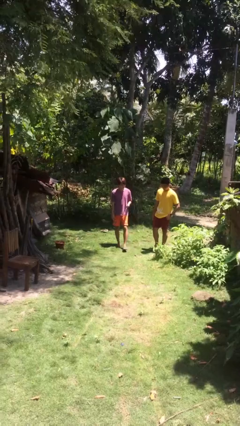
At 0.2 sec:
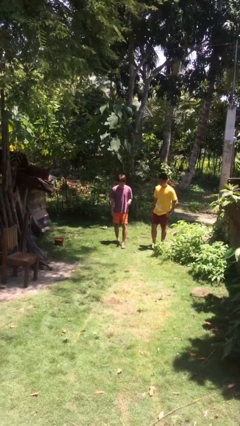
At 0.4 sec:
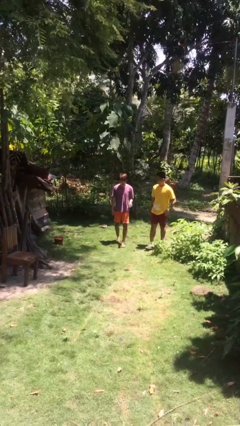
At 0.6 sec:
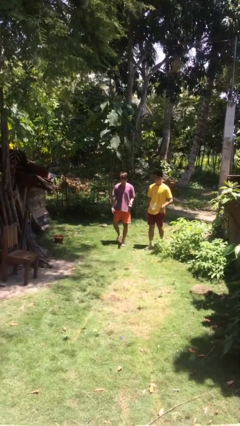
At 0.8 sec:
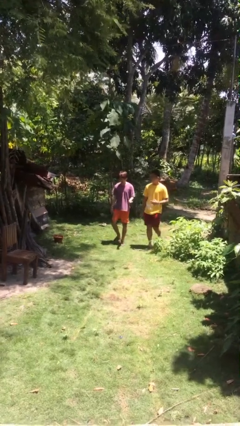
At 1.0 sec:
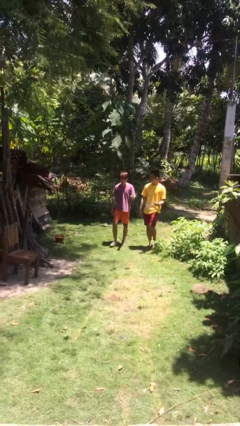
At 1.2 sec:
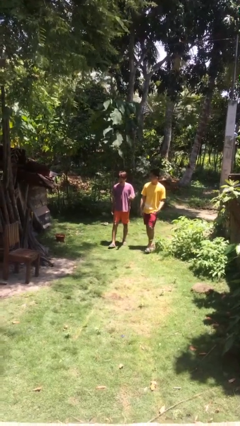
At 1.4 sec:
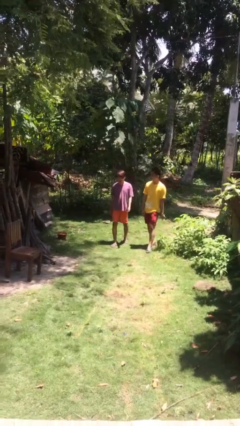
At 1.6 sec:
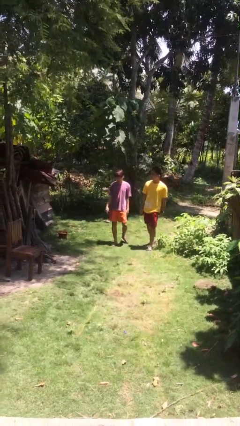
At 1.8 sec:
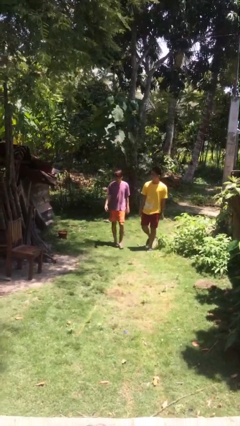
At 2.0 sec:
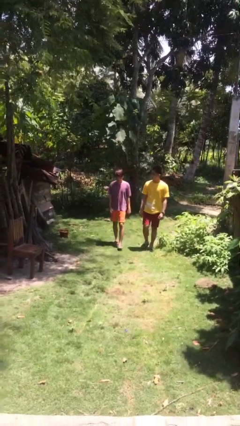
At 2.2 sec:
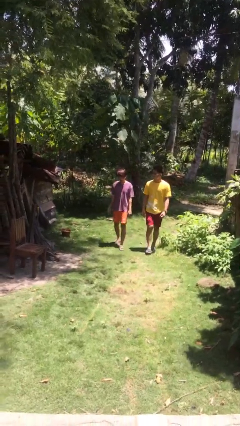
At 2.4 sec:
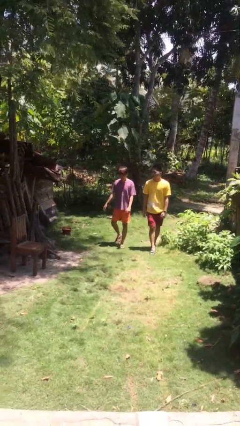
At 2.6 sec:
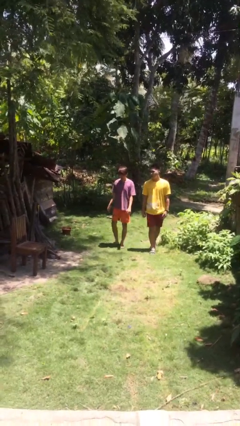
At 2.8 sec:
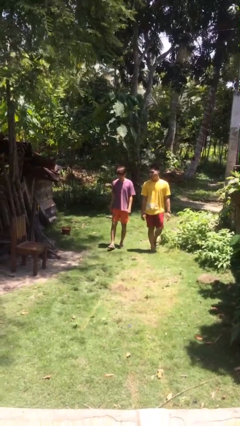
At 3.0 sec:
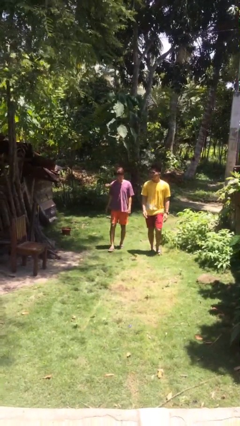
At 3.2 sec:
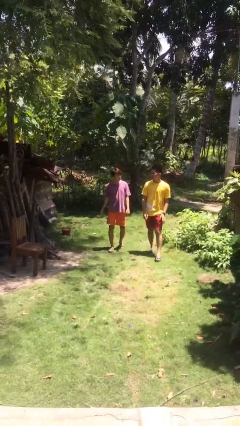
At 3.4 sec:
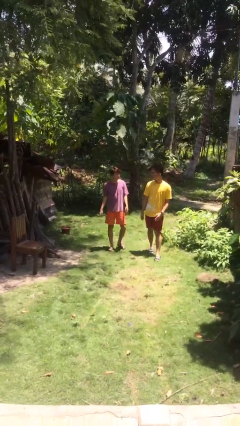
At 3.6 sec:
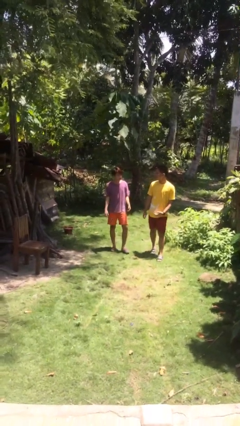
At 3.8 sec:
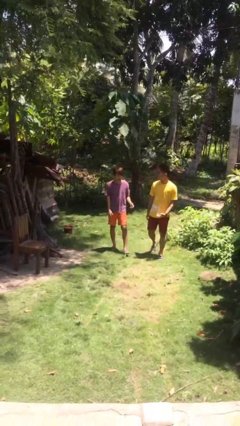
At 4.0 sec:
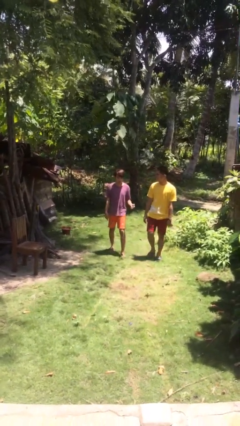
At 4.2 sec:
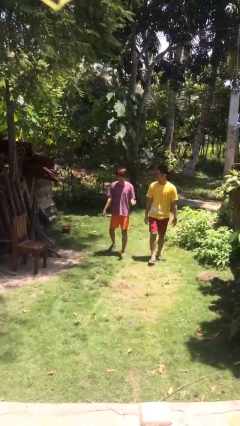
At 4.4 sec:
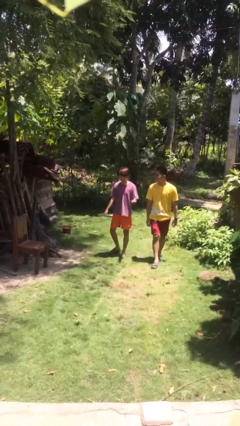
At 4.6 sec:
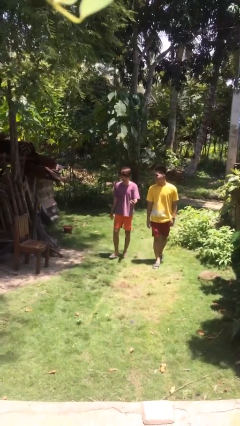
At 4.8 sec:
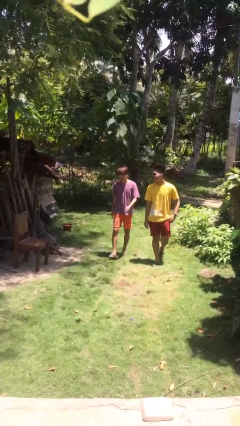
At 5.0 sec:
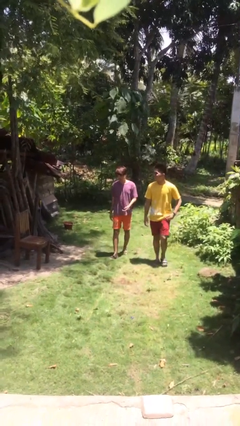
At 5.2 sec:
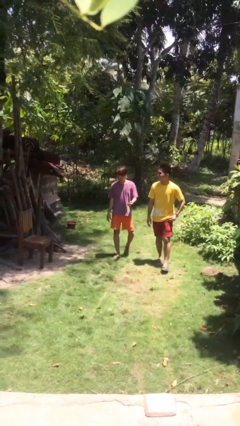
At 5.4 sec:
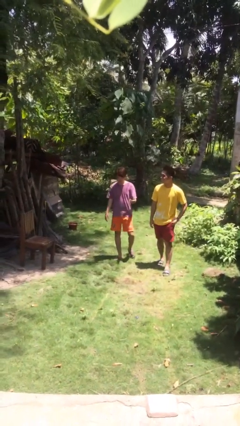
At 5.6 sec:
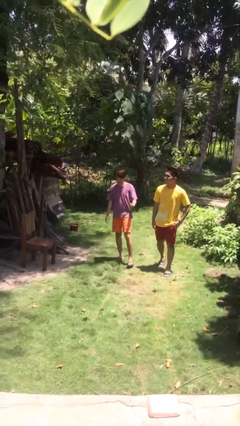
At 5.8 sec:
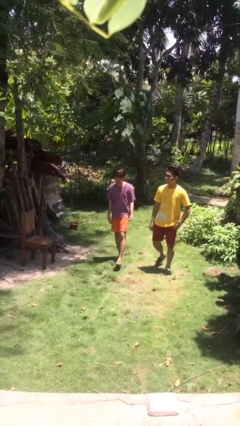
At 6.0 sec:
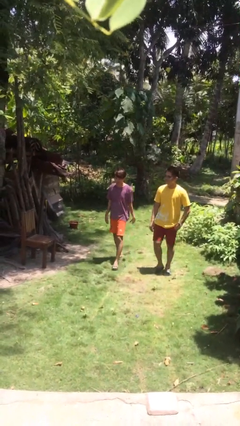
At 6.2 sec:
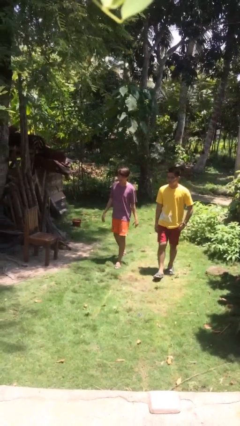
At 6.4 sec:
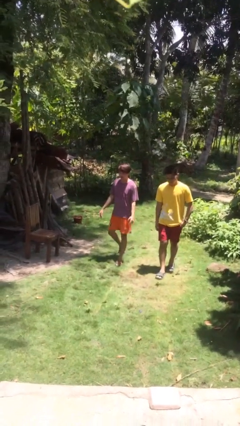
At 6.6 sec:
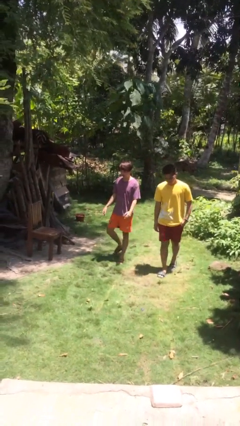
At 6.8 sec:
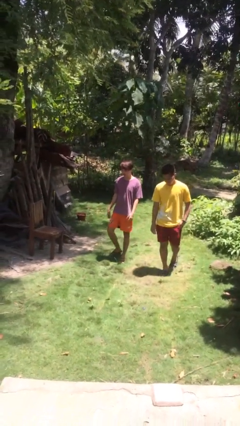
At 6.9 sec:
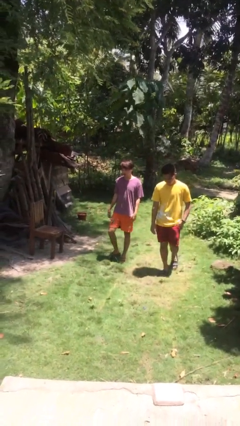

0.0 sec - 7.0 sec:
person talks to person

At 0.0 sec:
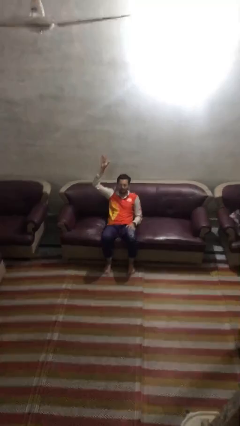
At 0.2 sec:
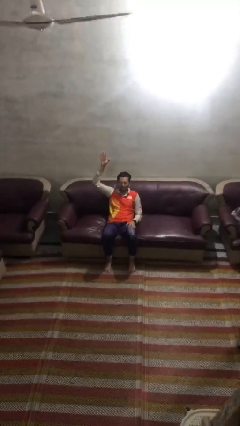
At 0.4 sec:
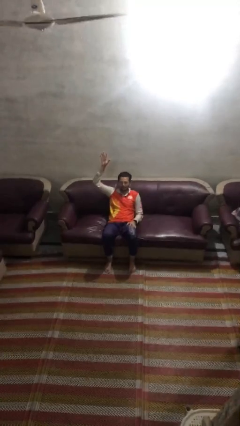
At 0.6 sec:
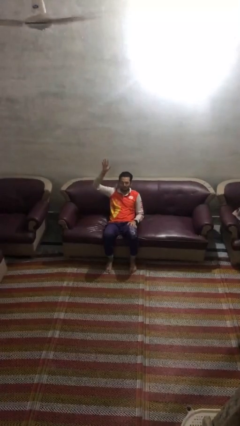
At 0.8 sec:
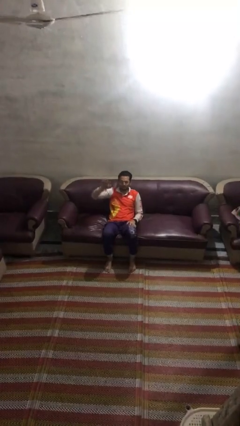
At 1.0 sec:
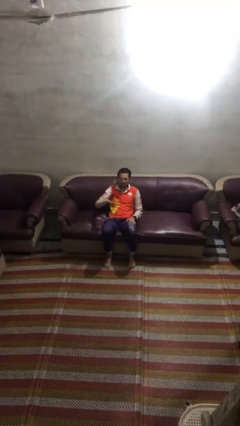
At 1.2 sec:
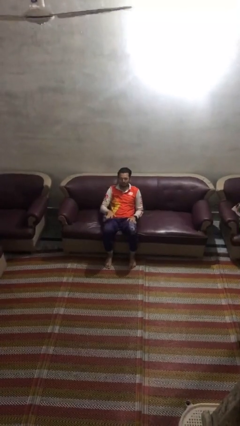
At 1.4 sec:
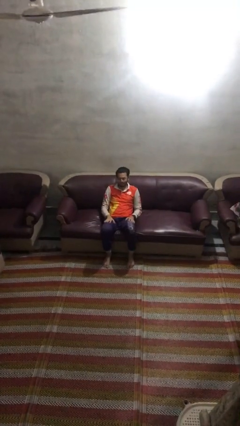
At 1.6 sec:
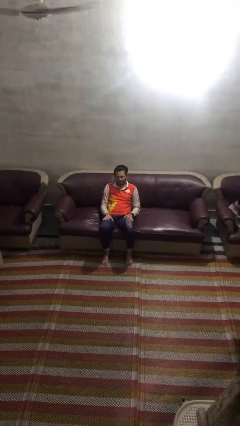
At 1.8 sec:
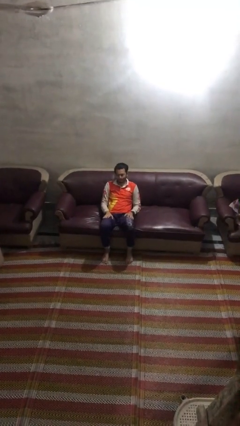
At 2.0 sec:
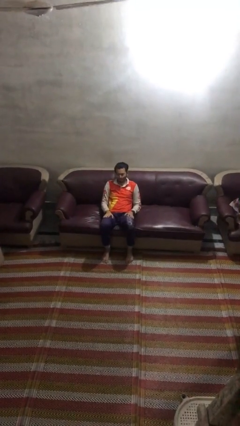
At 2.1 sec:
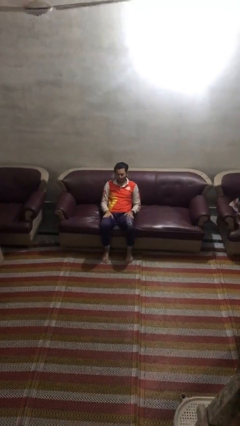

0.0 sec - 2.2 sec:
person gestures lower hand

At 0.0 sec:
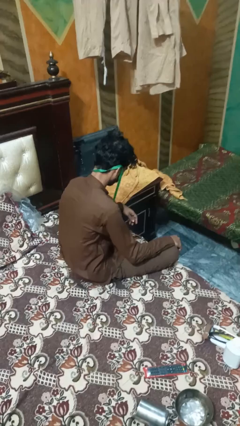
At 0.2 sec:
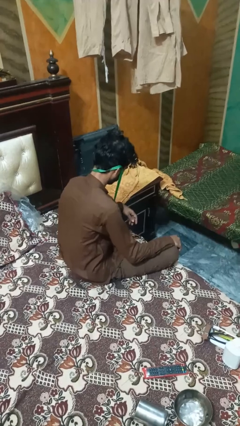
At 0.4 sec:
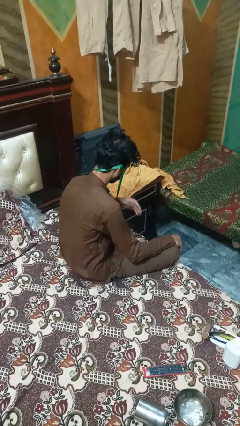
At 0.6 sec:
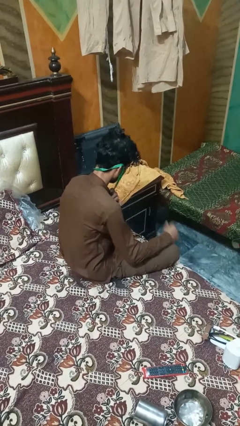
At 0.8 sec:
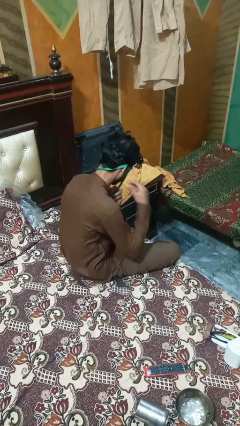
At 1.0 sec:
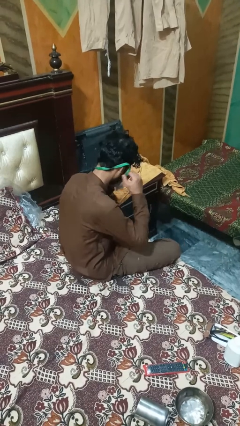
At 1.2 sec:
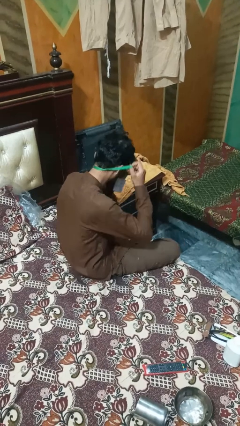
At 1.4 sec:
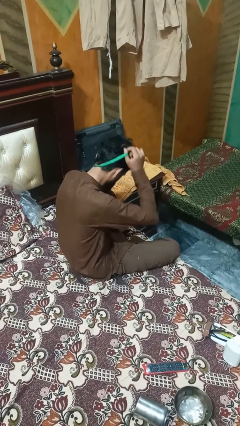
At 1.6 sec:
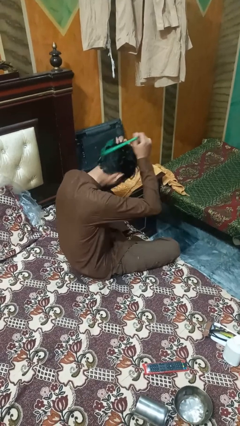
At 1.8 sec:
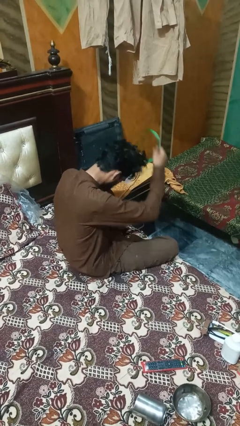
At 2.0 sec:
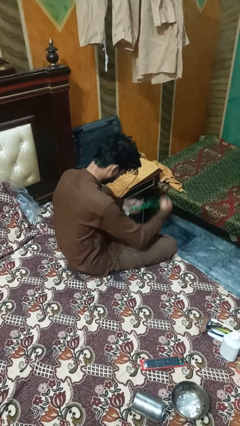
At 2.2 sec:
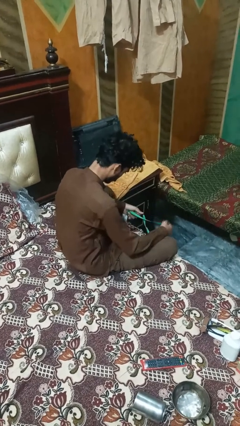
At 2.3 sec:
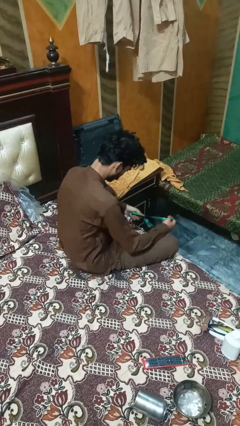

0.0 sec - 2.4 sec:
person takes off necklace

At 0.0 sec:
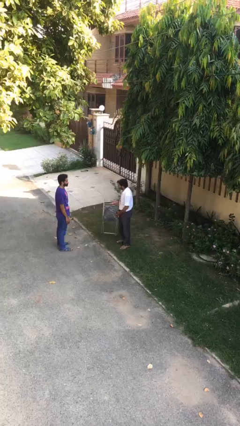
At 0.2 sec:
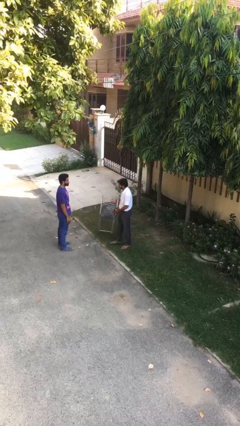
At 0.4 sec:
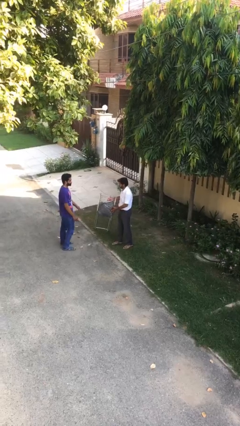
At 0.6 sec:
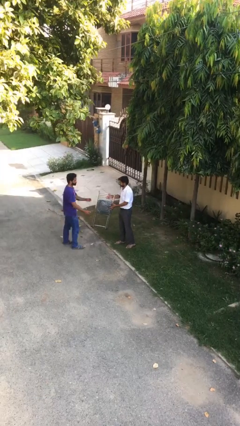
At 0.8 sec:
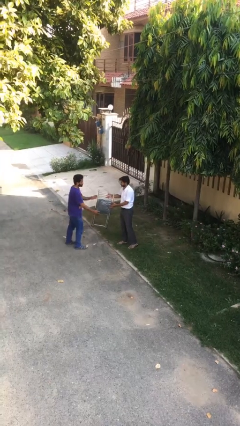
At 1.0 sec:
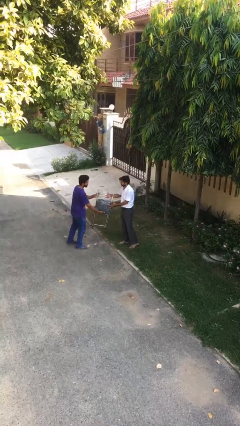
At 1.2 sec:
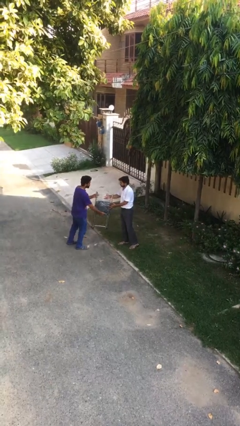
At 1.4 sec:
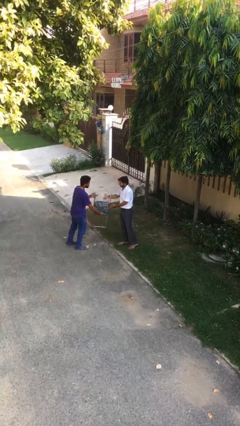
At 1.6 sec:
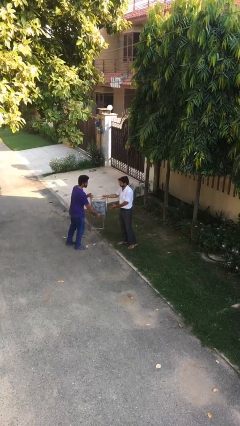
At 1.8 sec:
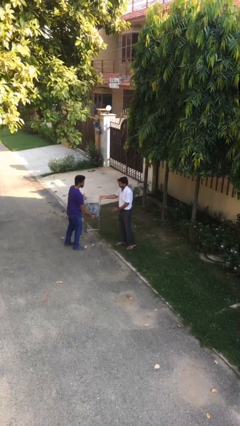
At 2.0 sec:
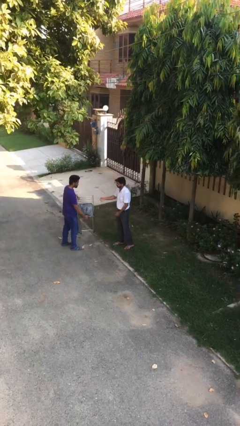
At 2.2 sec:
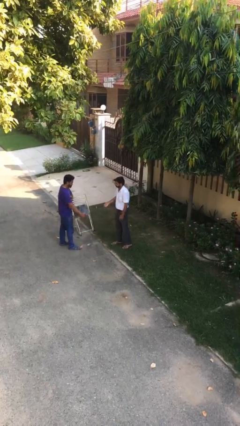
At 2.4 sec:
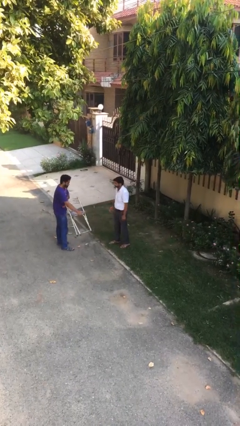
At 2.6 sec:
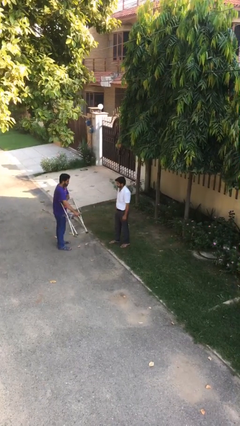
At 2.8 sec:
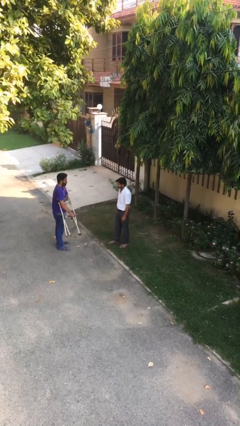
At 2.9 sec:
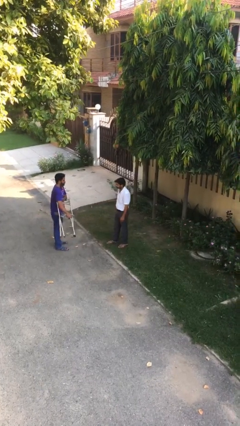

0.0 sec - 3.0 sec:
person transfers object to person

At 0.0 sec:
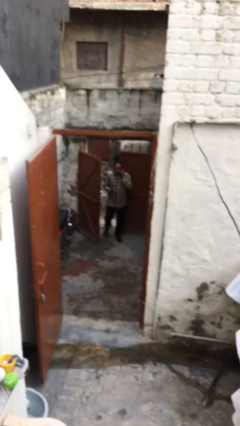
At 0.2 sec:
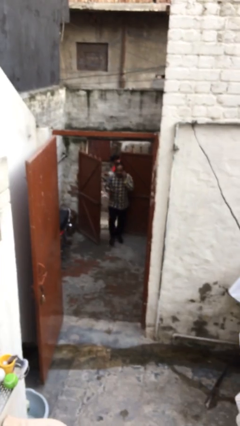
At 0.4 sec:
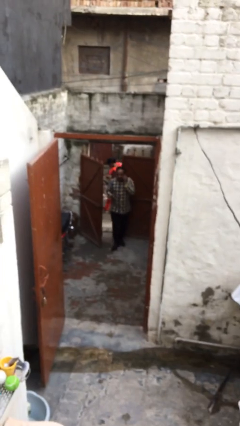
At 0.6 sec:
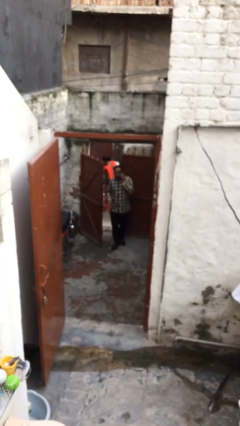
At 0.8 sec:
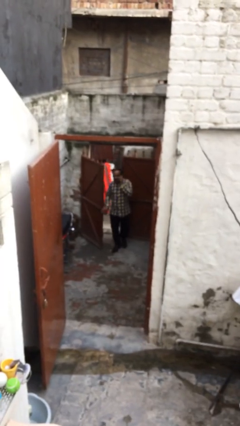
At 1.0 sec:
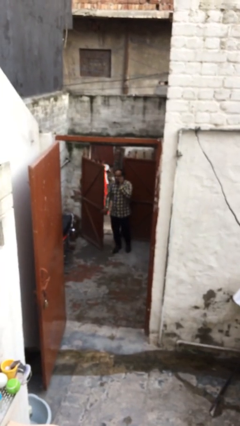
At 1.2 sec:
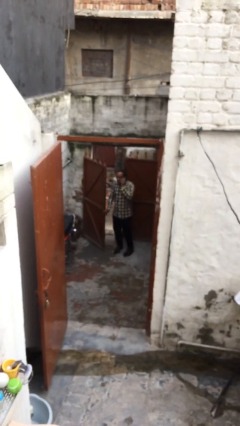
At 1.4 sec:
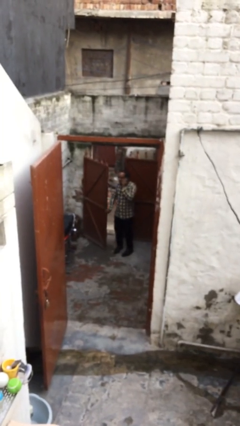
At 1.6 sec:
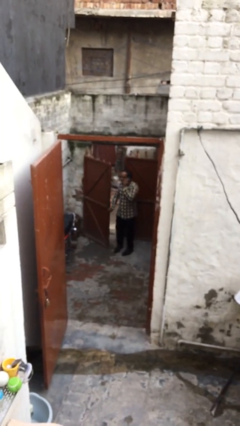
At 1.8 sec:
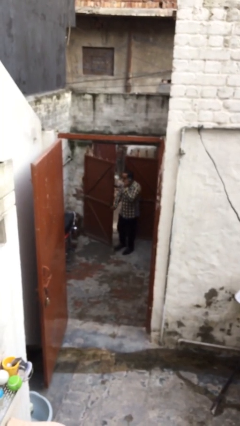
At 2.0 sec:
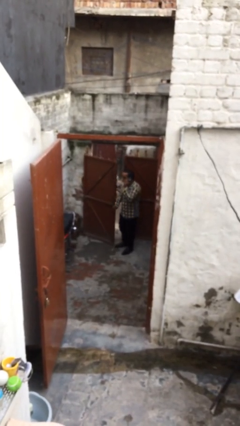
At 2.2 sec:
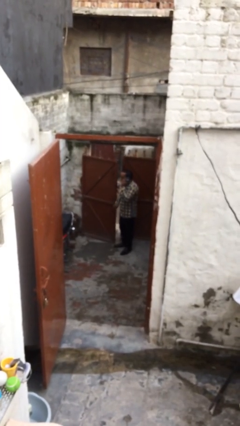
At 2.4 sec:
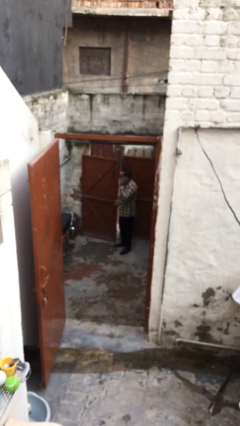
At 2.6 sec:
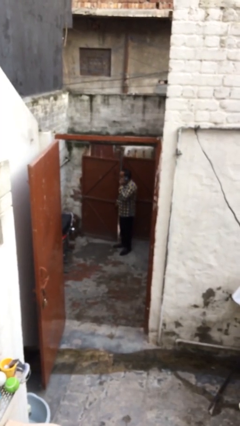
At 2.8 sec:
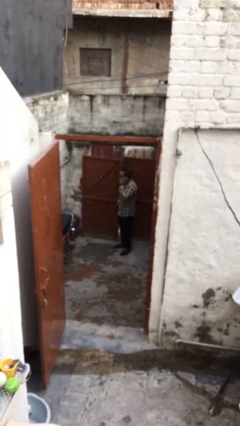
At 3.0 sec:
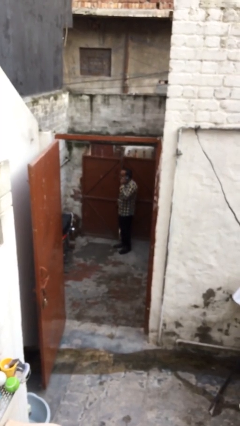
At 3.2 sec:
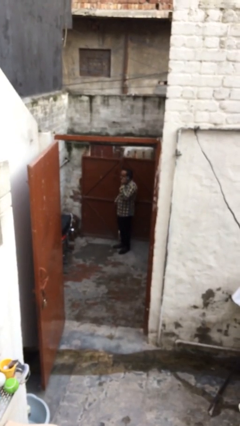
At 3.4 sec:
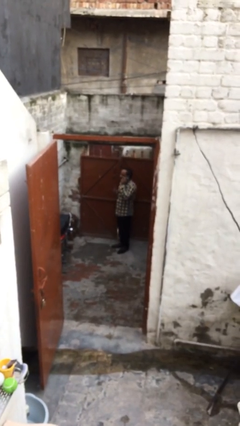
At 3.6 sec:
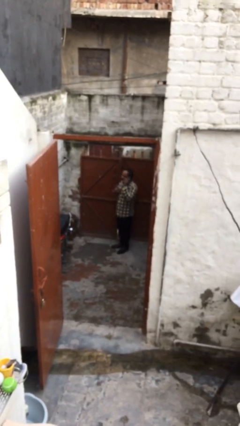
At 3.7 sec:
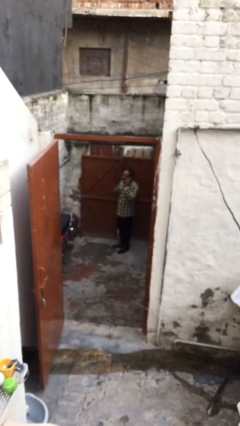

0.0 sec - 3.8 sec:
person closes facility door
